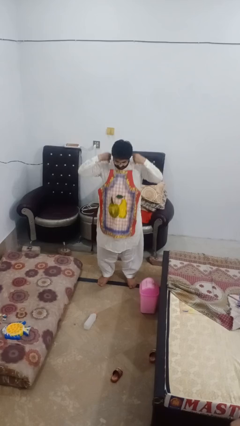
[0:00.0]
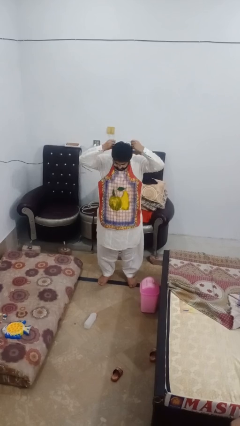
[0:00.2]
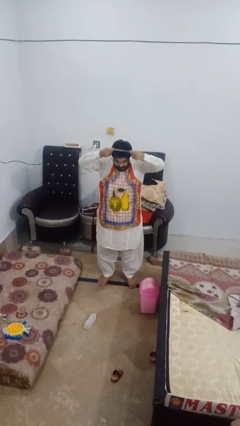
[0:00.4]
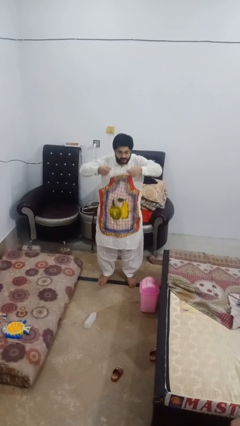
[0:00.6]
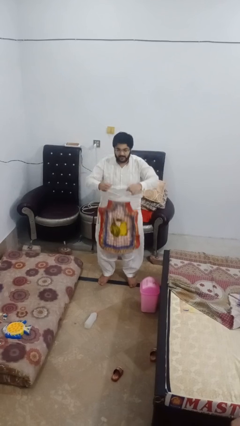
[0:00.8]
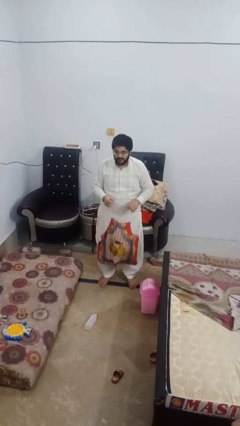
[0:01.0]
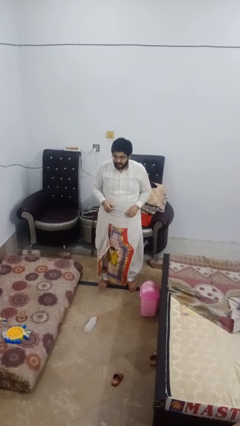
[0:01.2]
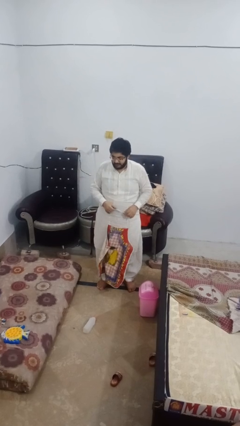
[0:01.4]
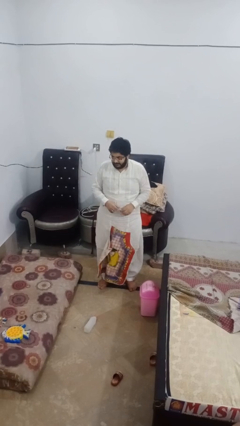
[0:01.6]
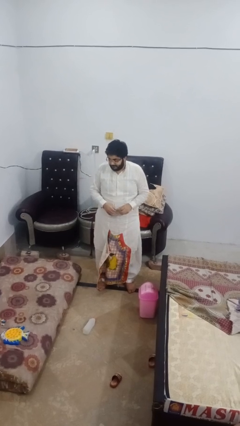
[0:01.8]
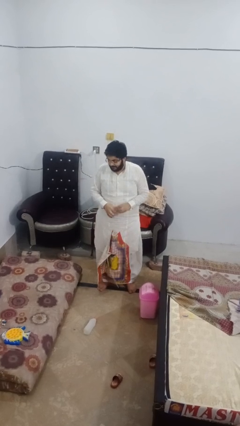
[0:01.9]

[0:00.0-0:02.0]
person takes off apron

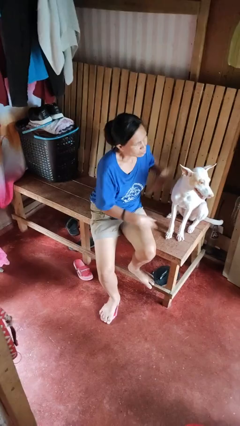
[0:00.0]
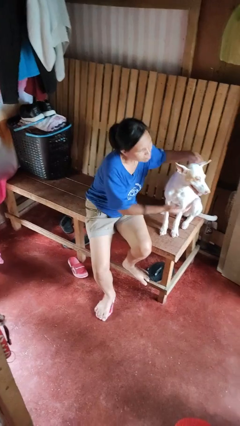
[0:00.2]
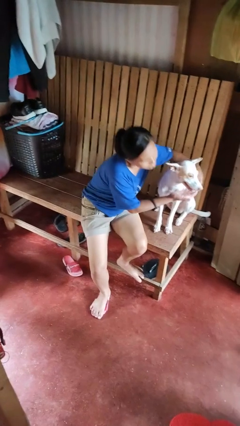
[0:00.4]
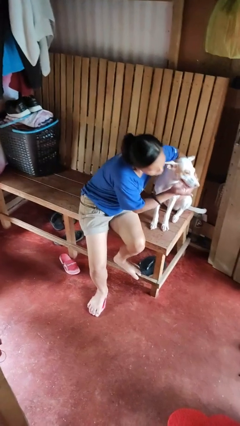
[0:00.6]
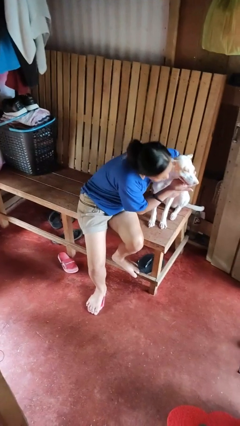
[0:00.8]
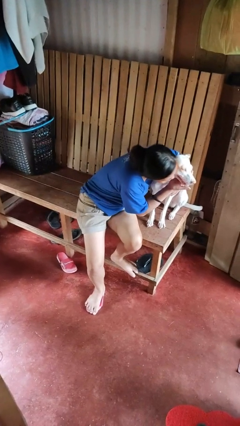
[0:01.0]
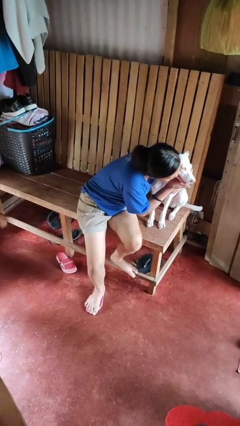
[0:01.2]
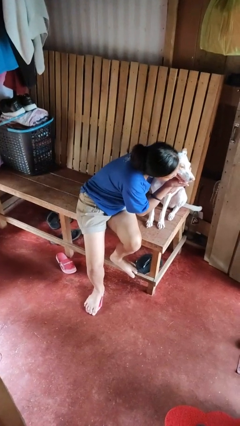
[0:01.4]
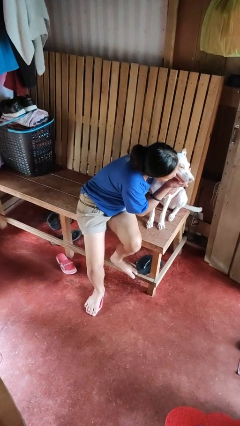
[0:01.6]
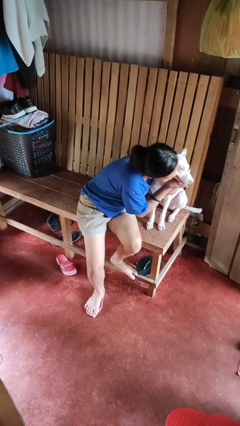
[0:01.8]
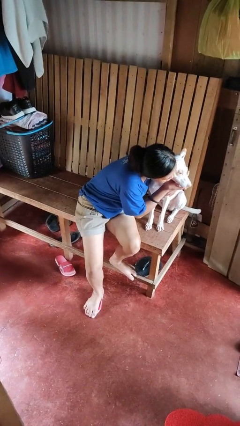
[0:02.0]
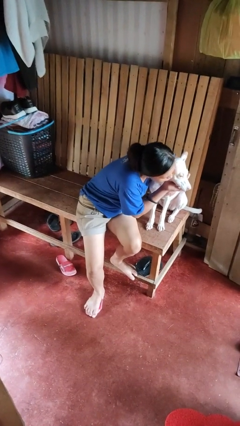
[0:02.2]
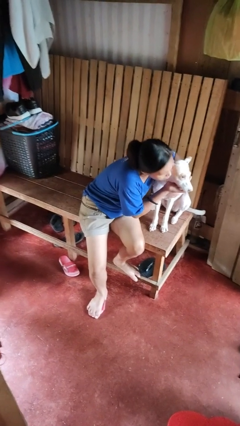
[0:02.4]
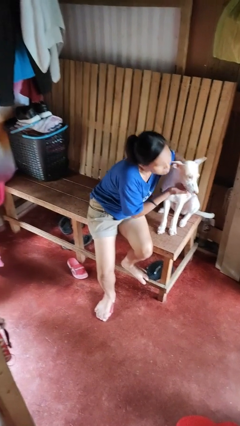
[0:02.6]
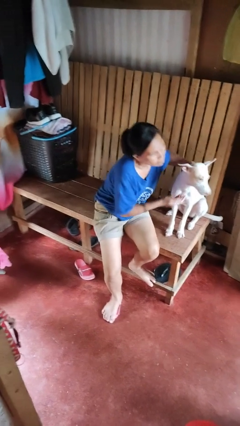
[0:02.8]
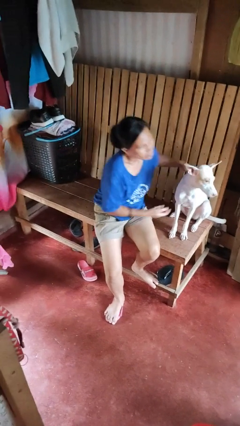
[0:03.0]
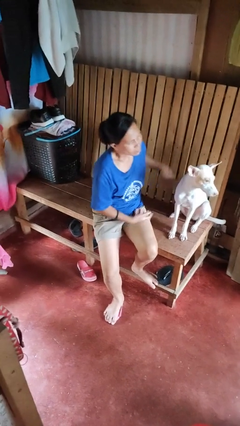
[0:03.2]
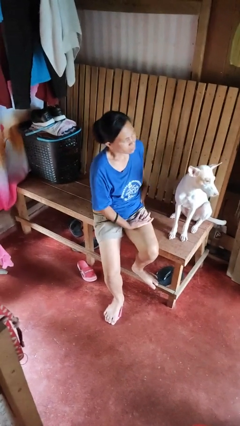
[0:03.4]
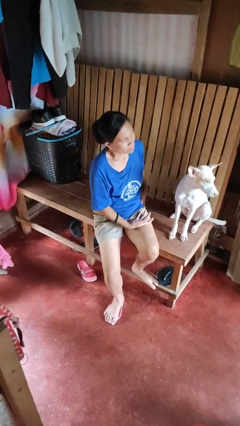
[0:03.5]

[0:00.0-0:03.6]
person hugs dog

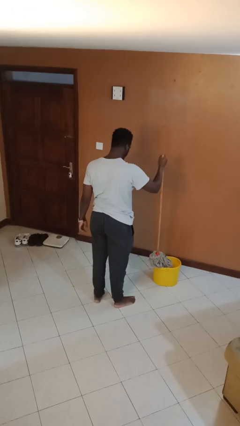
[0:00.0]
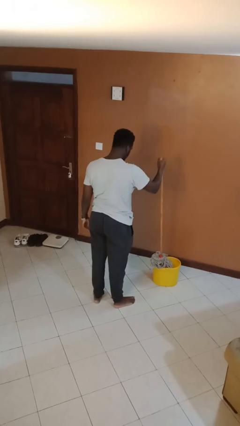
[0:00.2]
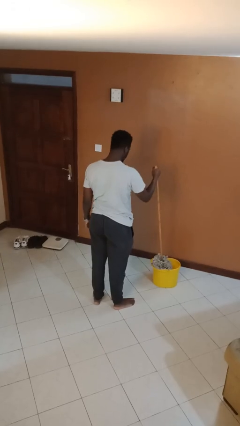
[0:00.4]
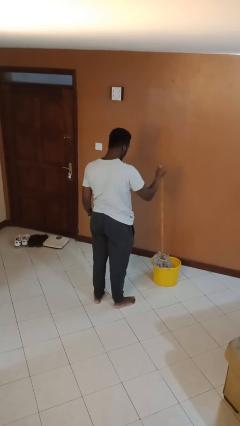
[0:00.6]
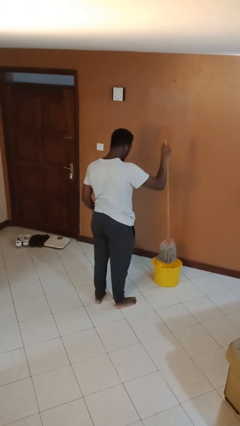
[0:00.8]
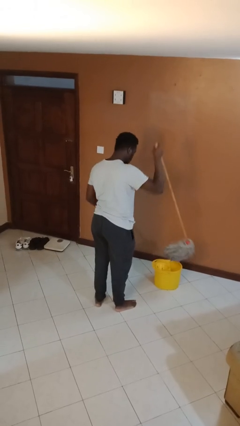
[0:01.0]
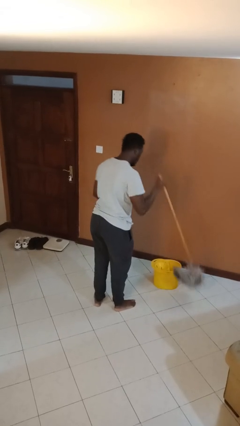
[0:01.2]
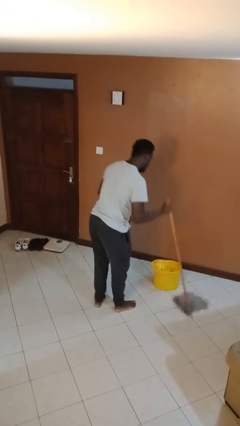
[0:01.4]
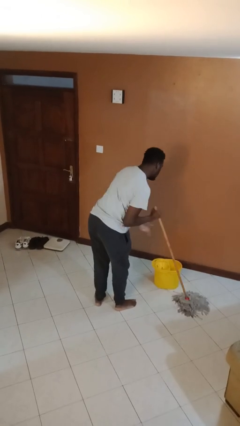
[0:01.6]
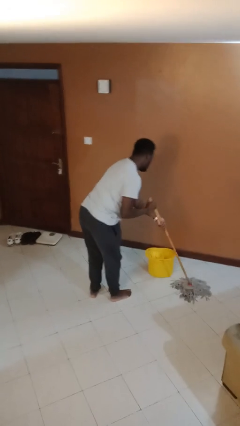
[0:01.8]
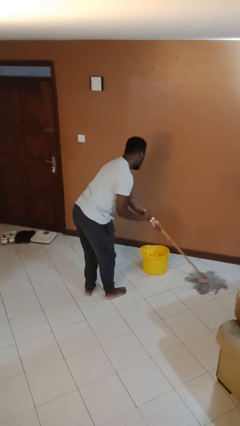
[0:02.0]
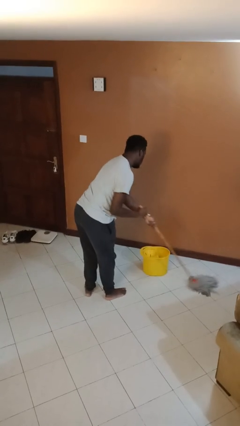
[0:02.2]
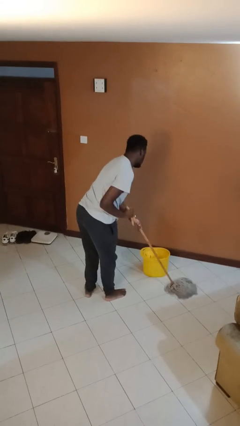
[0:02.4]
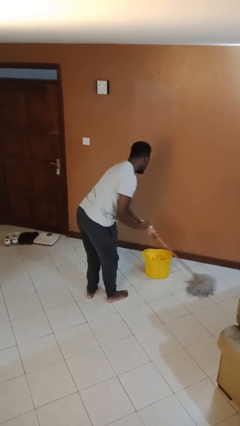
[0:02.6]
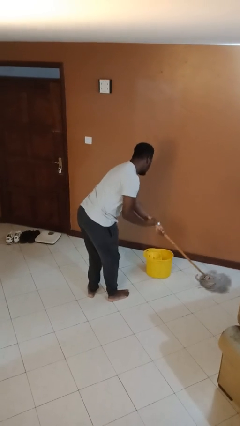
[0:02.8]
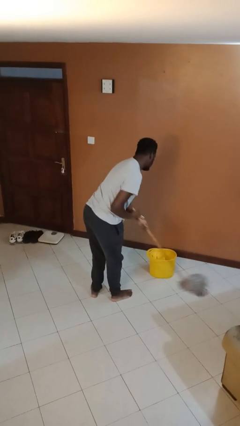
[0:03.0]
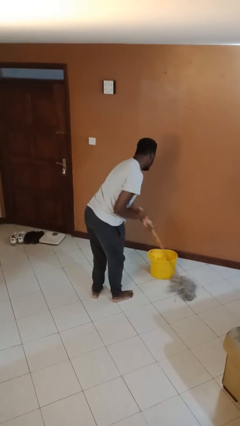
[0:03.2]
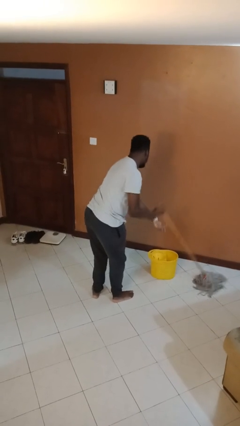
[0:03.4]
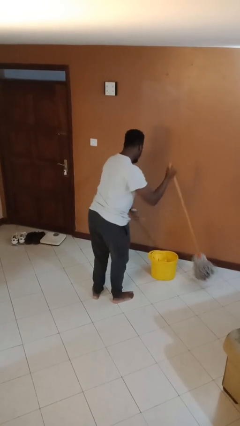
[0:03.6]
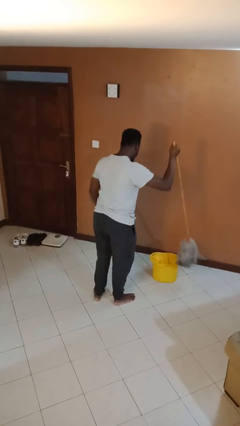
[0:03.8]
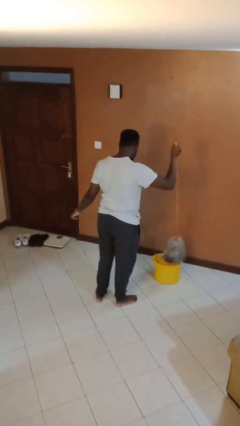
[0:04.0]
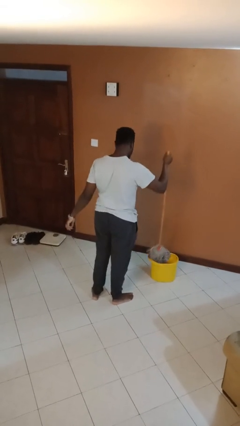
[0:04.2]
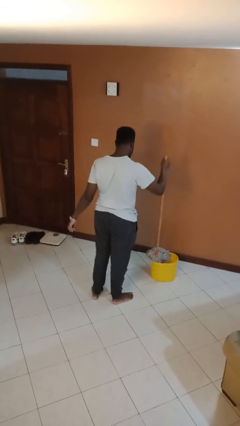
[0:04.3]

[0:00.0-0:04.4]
person mops

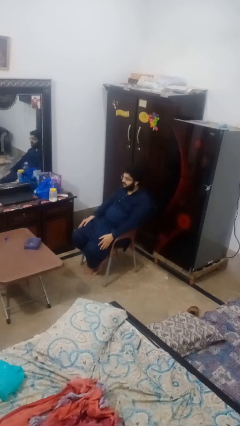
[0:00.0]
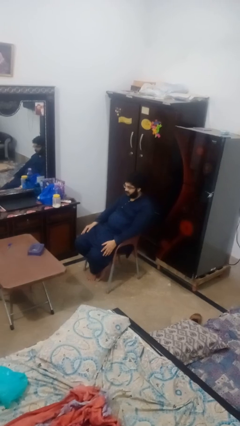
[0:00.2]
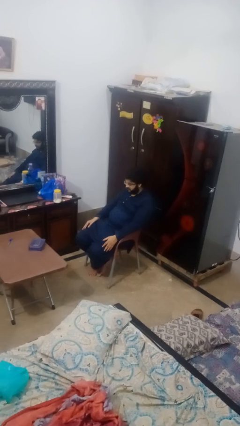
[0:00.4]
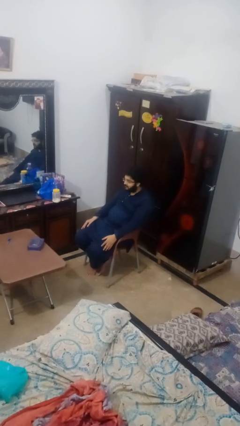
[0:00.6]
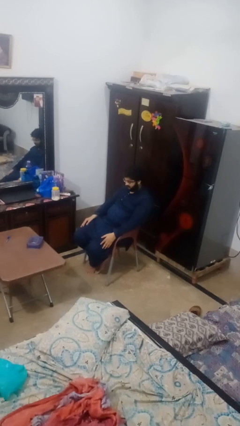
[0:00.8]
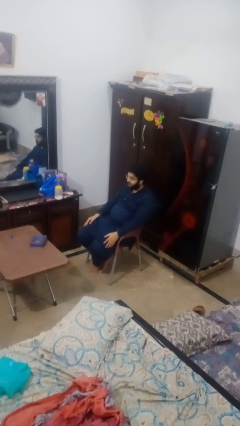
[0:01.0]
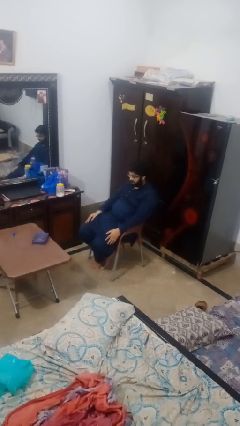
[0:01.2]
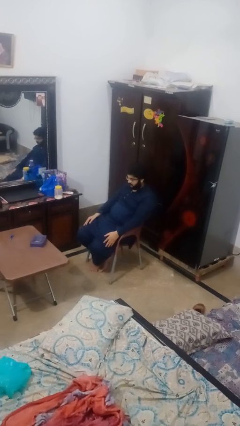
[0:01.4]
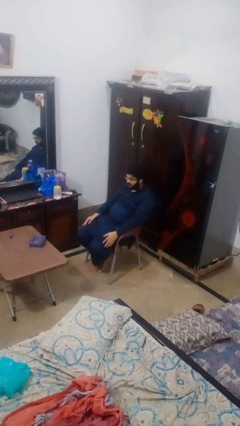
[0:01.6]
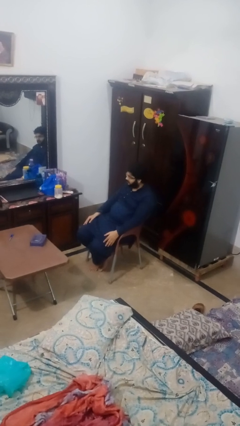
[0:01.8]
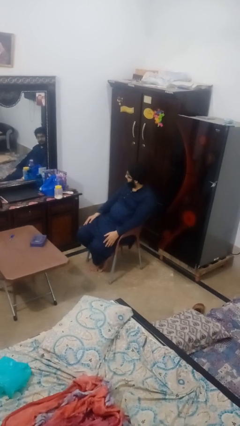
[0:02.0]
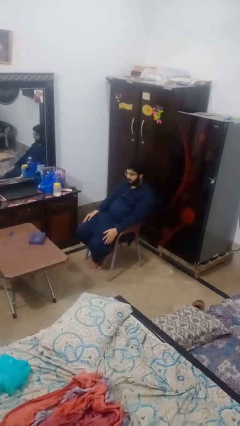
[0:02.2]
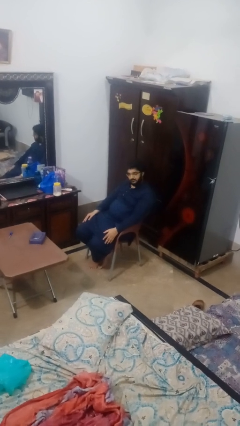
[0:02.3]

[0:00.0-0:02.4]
person nods head

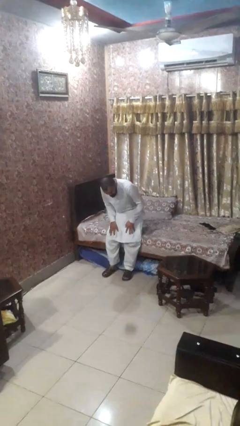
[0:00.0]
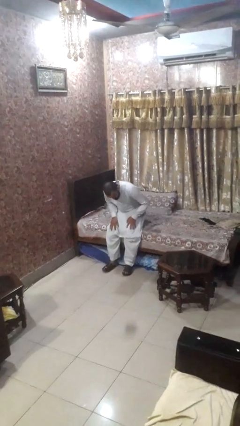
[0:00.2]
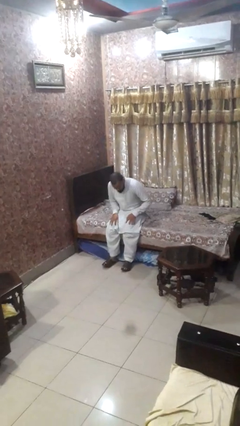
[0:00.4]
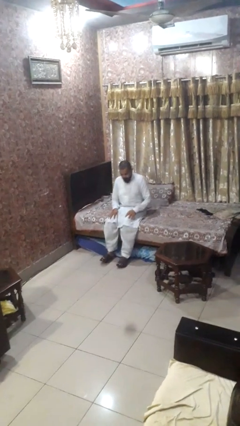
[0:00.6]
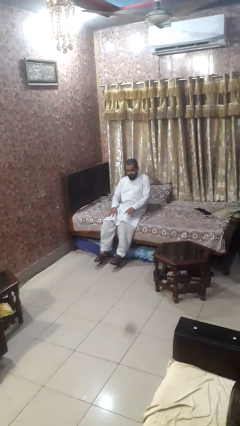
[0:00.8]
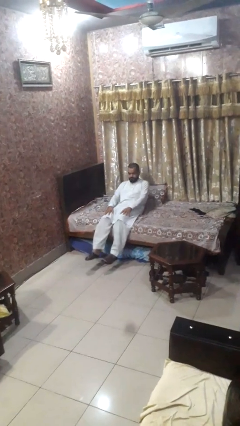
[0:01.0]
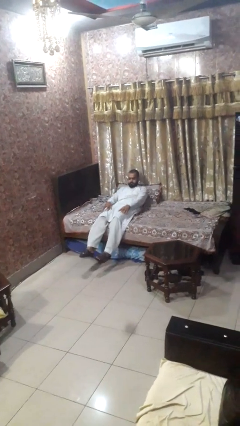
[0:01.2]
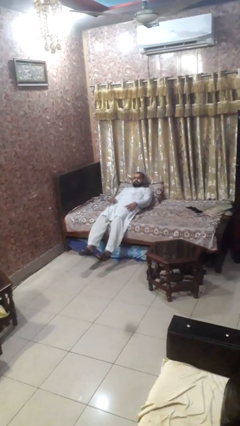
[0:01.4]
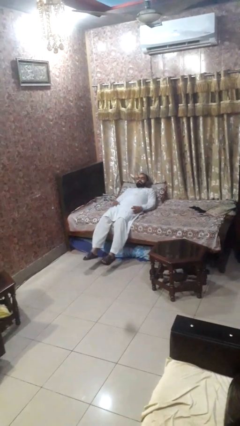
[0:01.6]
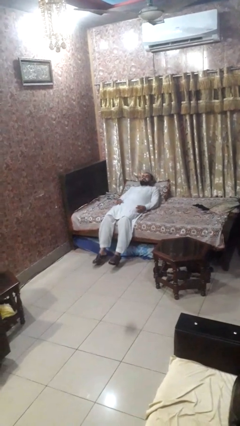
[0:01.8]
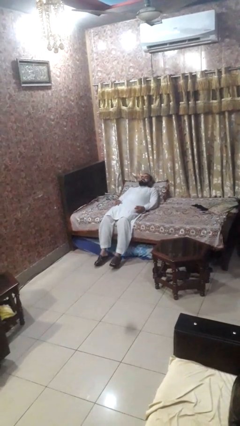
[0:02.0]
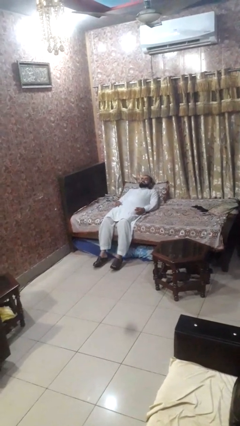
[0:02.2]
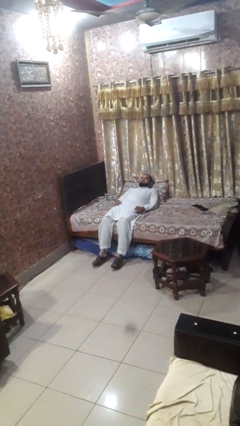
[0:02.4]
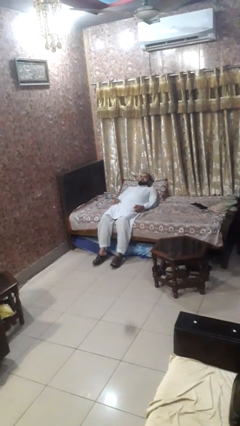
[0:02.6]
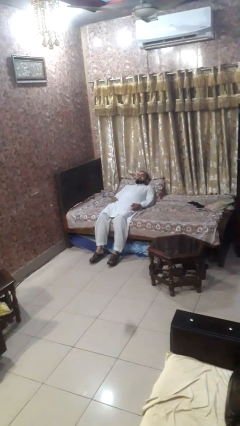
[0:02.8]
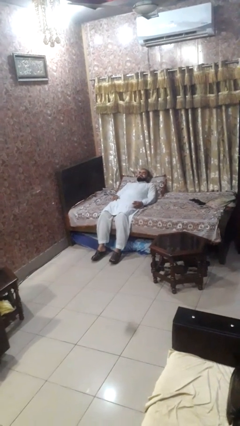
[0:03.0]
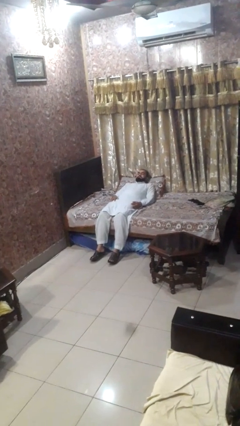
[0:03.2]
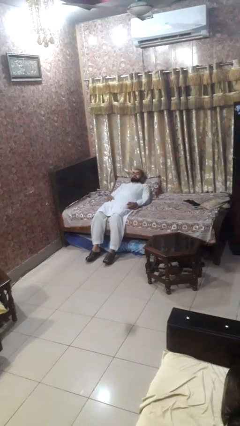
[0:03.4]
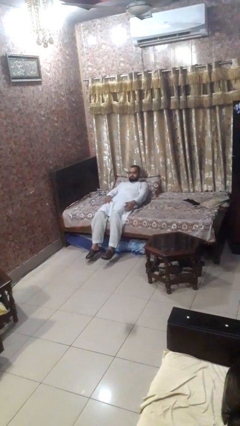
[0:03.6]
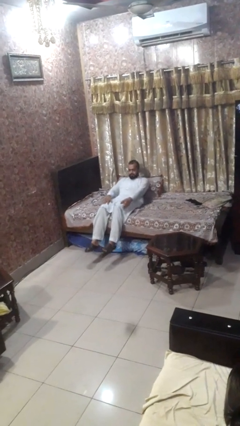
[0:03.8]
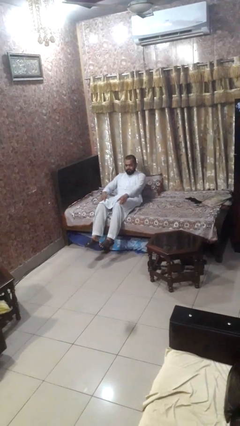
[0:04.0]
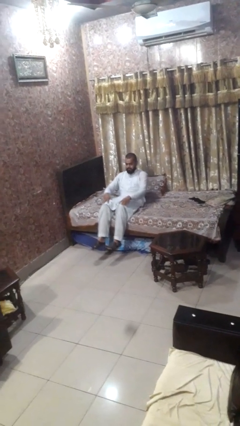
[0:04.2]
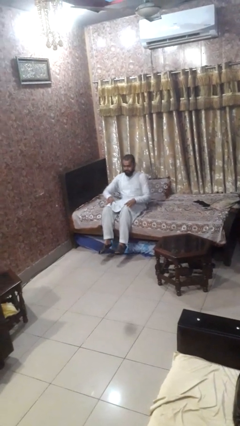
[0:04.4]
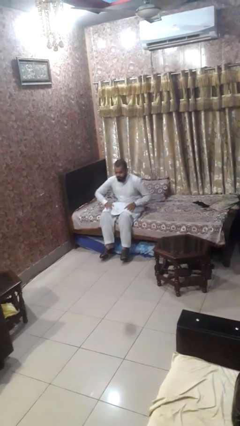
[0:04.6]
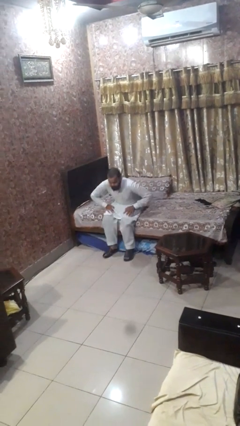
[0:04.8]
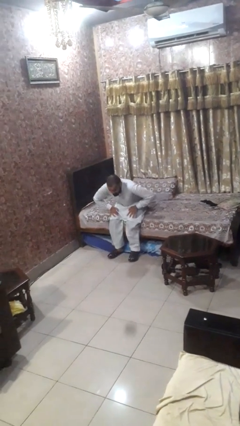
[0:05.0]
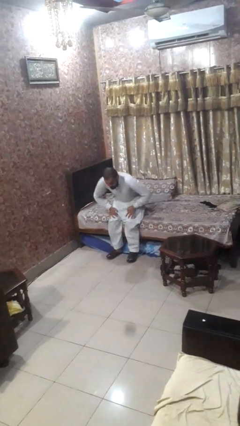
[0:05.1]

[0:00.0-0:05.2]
person lies down on bed
